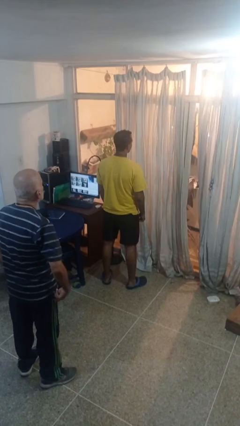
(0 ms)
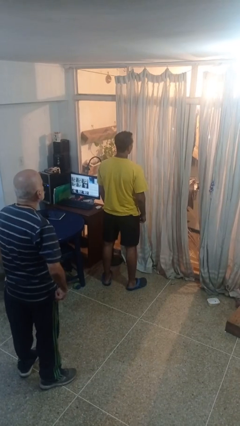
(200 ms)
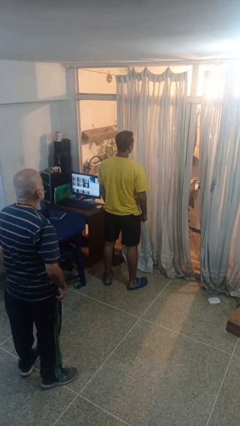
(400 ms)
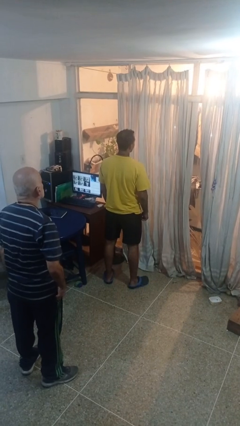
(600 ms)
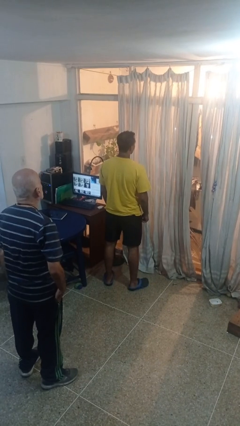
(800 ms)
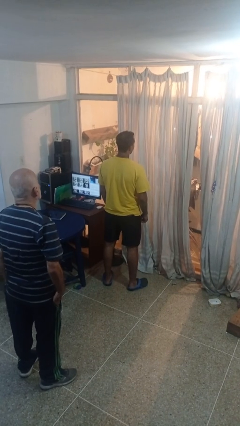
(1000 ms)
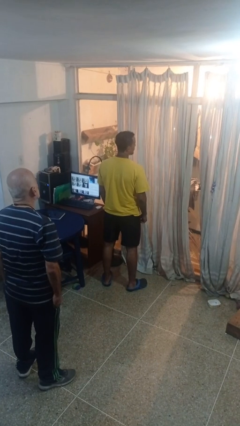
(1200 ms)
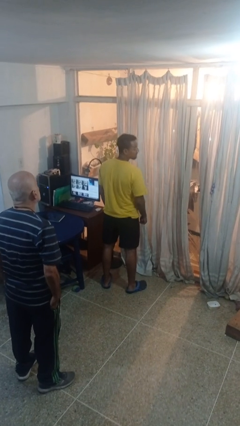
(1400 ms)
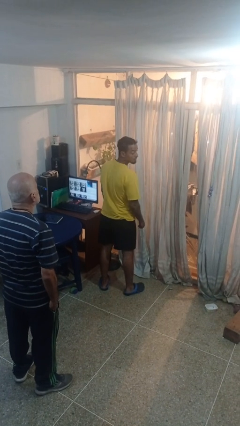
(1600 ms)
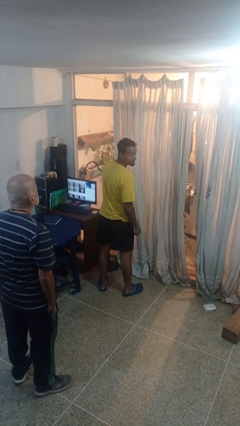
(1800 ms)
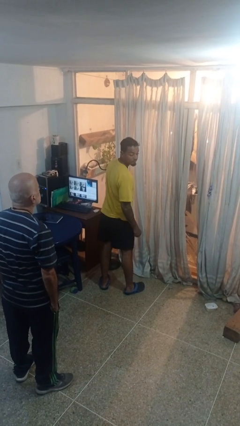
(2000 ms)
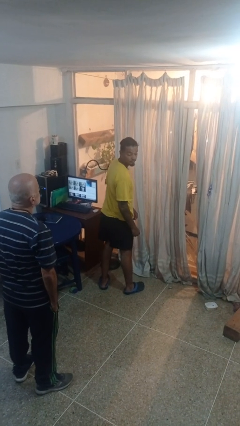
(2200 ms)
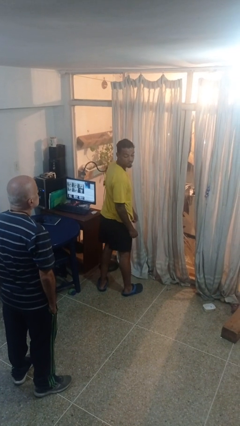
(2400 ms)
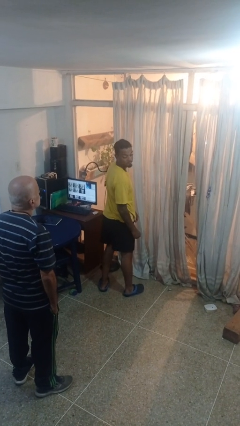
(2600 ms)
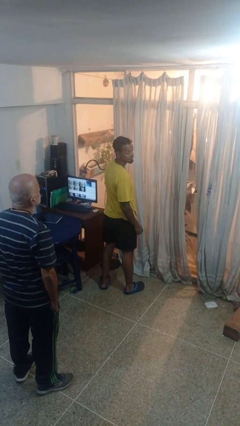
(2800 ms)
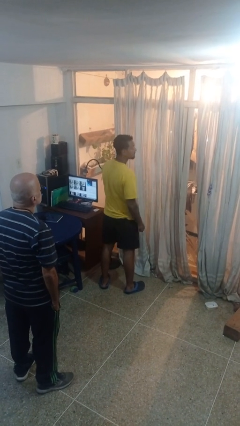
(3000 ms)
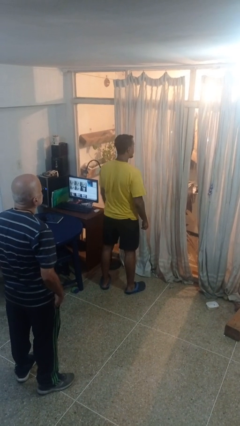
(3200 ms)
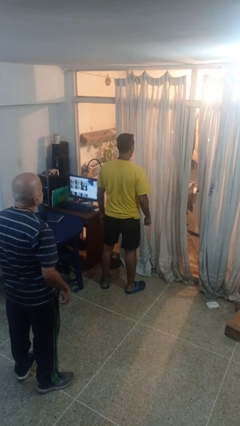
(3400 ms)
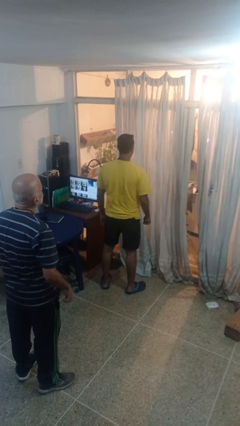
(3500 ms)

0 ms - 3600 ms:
person looks over shoulder

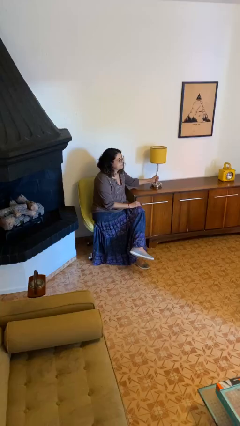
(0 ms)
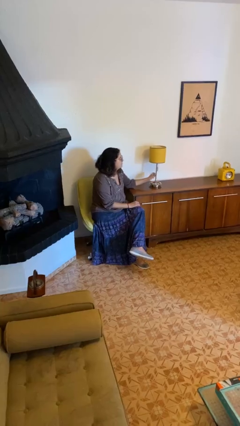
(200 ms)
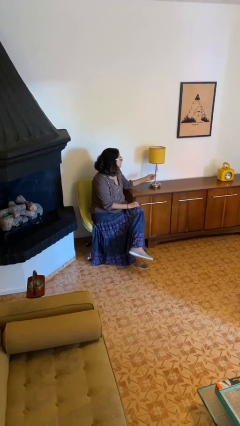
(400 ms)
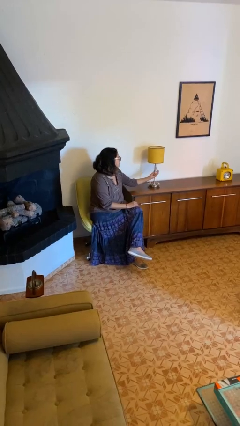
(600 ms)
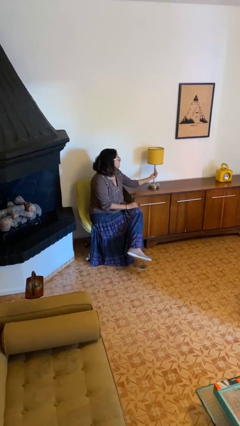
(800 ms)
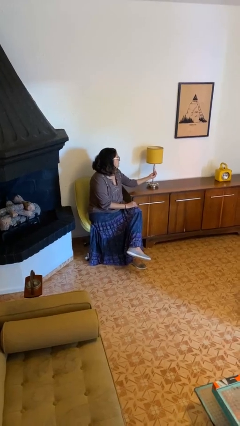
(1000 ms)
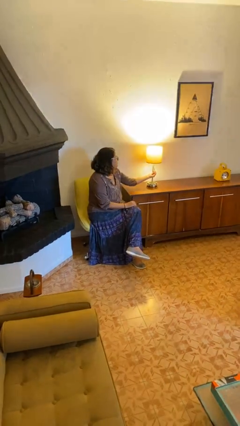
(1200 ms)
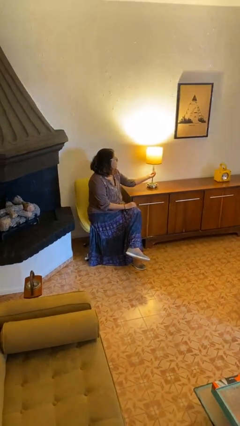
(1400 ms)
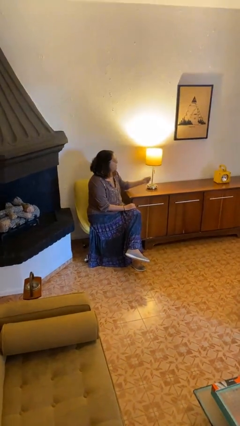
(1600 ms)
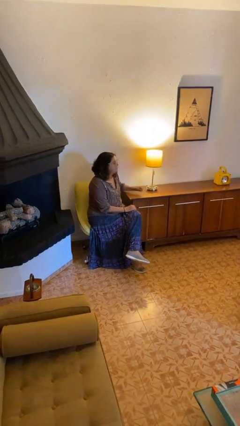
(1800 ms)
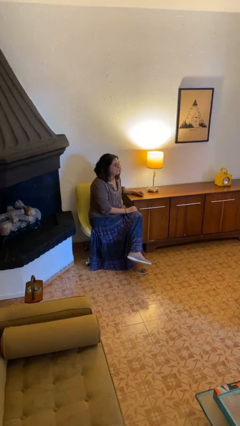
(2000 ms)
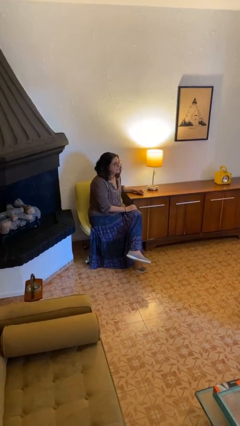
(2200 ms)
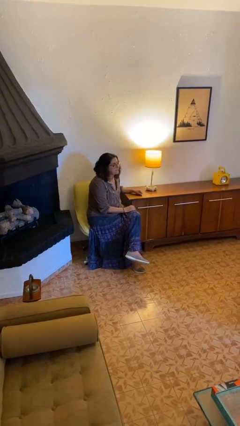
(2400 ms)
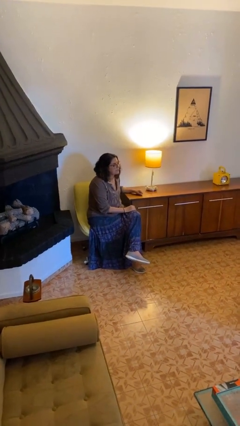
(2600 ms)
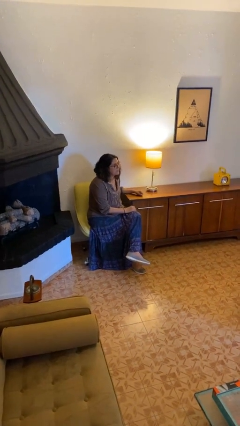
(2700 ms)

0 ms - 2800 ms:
person turns on lamp

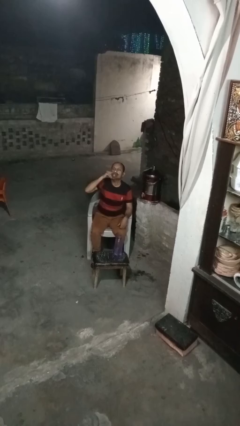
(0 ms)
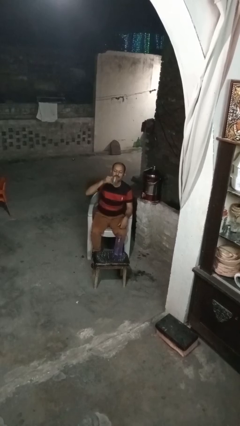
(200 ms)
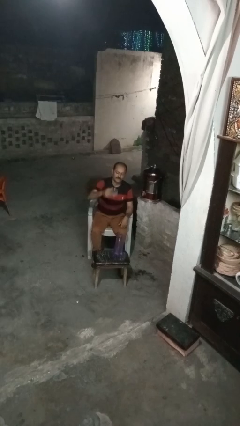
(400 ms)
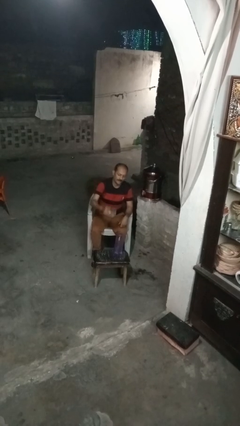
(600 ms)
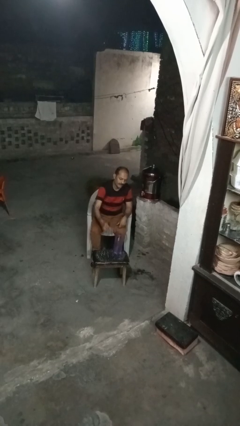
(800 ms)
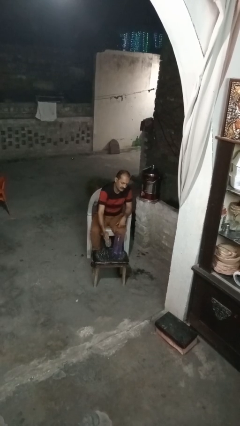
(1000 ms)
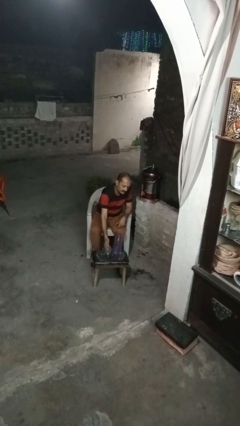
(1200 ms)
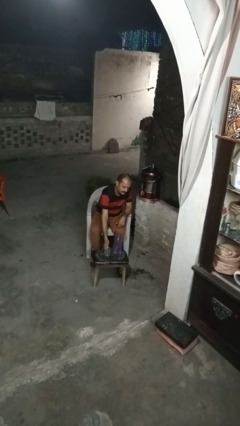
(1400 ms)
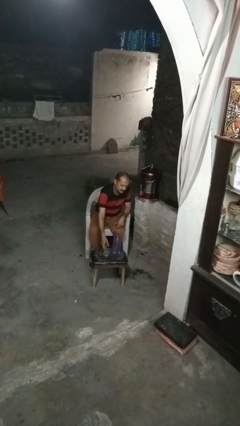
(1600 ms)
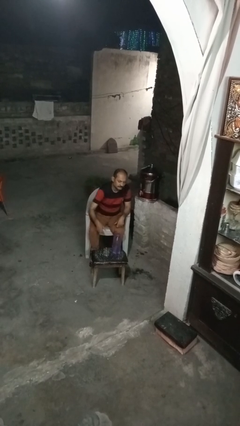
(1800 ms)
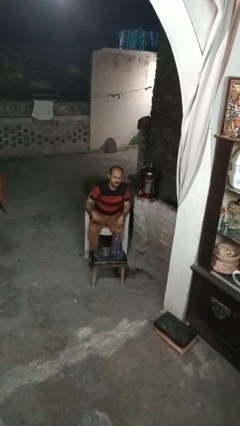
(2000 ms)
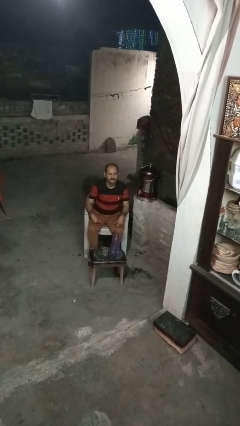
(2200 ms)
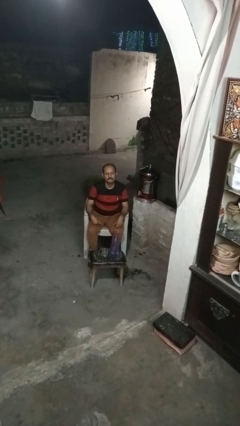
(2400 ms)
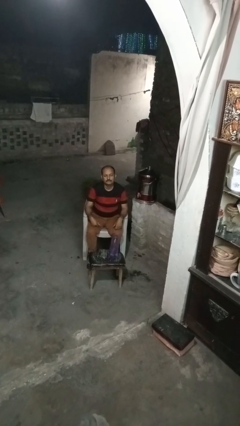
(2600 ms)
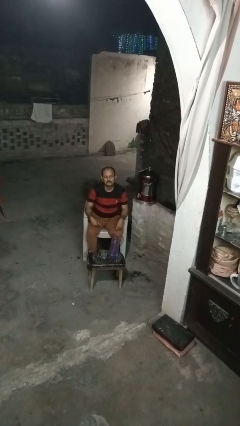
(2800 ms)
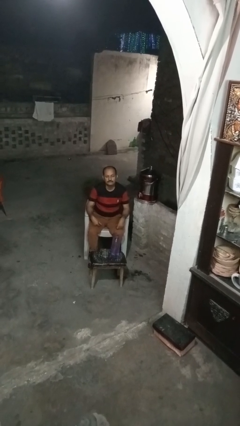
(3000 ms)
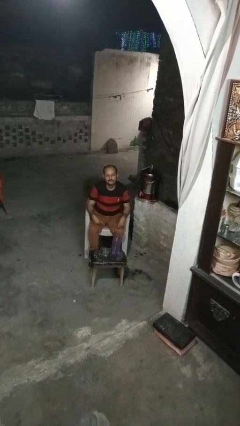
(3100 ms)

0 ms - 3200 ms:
person puts down object on table

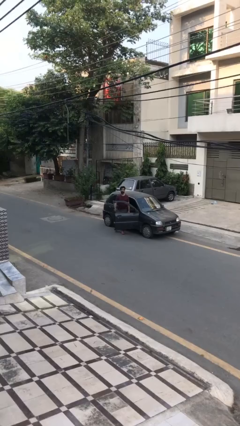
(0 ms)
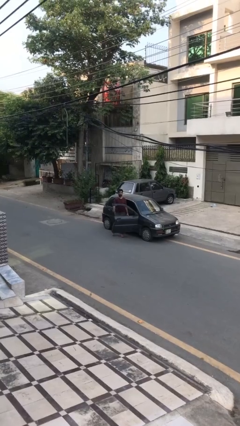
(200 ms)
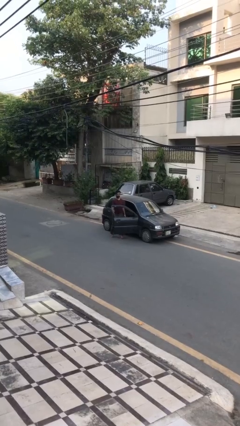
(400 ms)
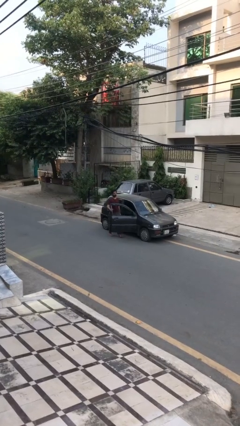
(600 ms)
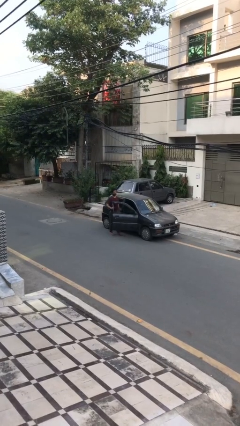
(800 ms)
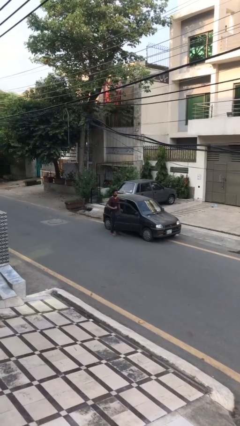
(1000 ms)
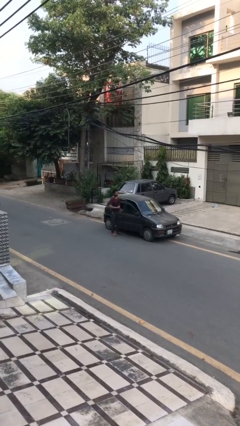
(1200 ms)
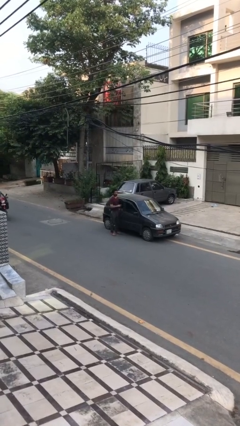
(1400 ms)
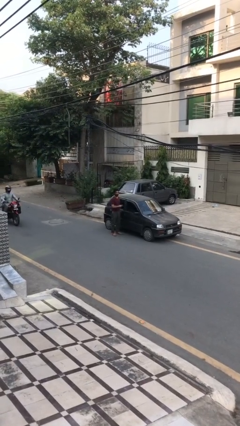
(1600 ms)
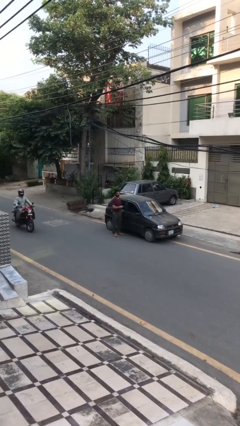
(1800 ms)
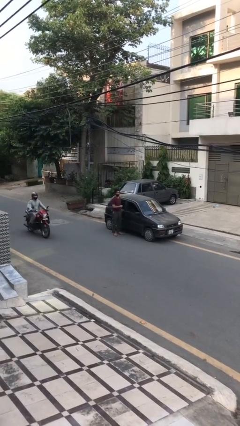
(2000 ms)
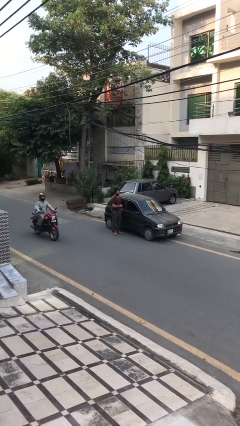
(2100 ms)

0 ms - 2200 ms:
person closes car door

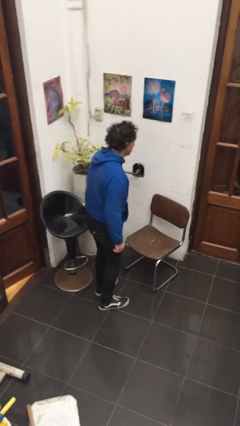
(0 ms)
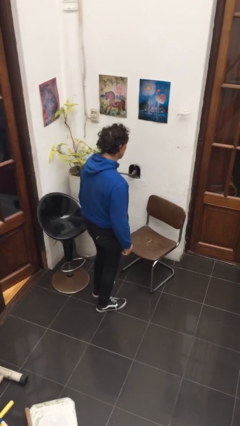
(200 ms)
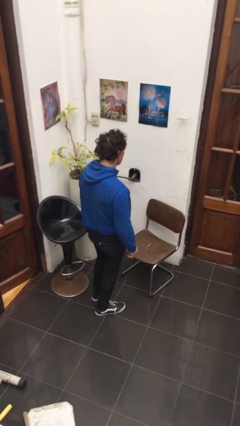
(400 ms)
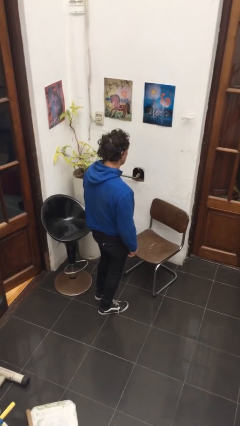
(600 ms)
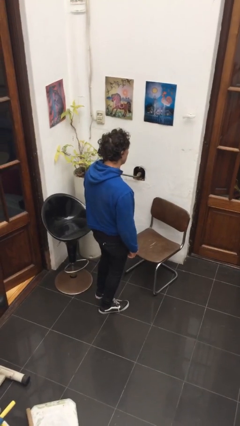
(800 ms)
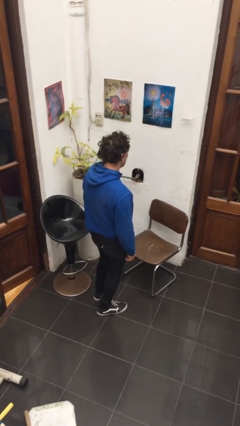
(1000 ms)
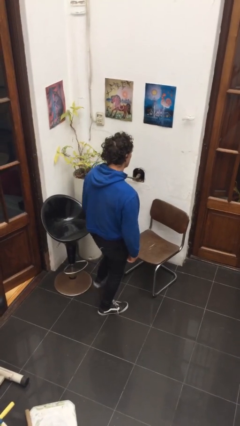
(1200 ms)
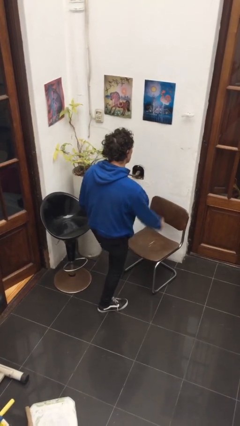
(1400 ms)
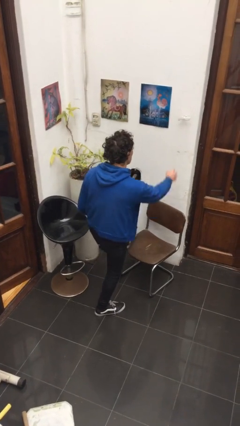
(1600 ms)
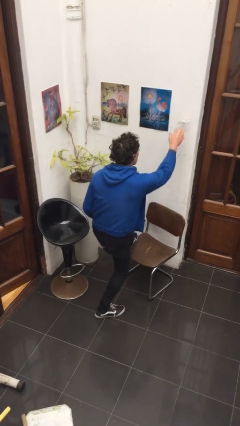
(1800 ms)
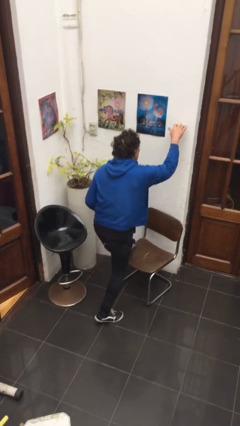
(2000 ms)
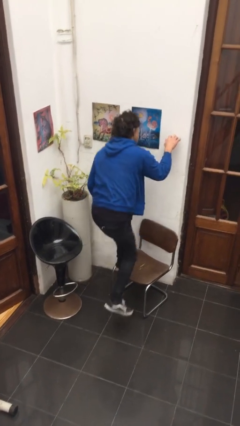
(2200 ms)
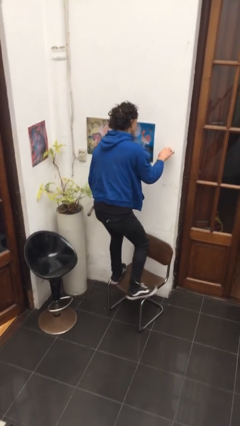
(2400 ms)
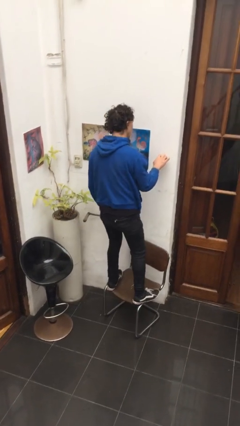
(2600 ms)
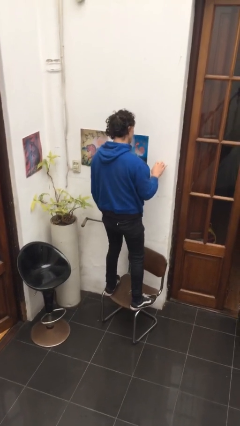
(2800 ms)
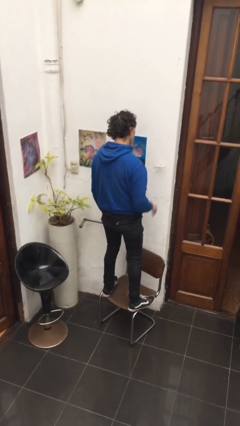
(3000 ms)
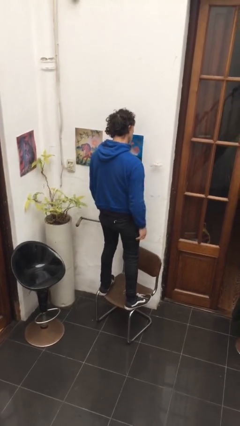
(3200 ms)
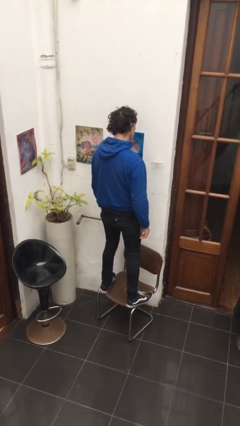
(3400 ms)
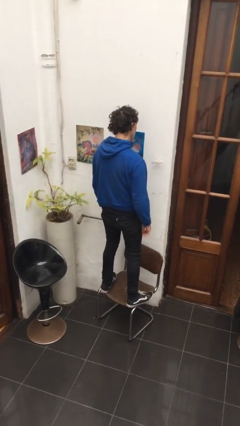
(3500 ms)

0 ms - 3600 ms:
person climbs on chair

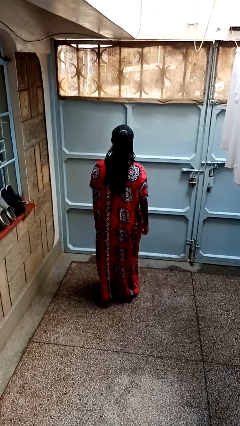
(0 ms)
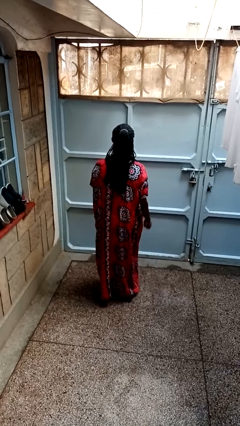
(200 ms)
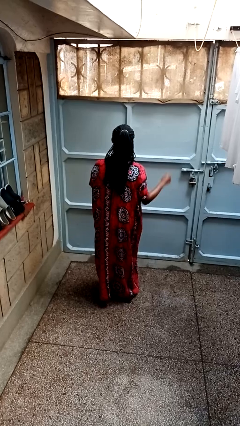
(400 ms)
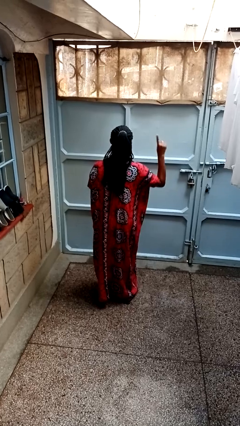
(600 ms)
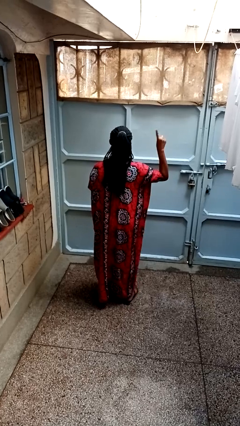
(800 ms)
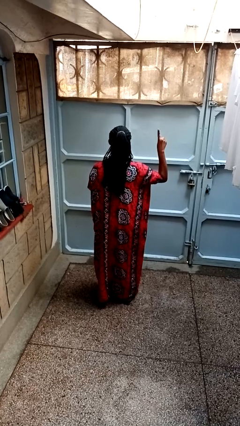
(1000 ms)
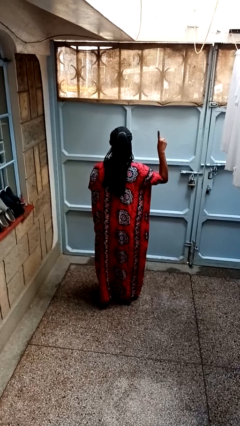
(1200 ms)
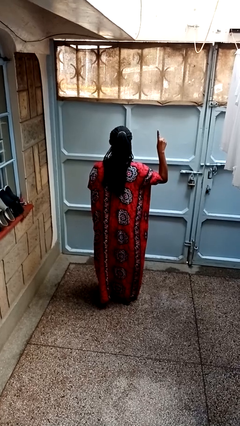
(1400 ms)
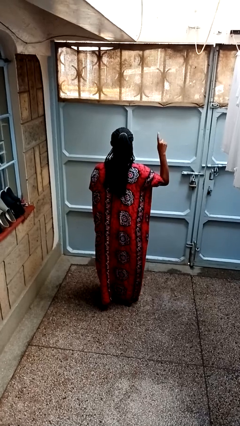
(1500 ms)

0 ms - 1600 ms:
person gestures number one

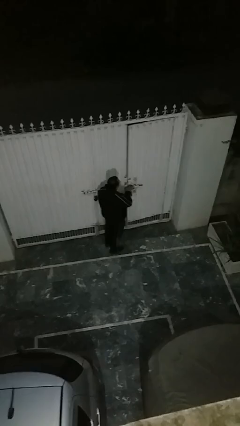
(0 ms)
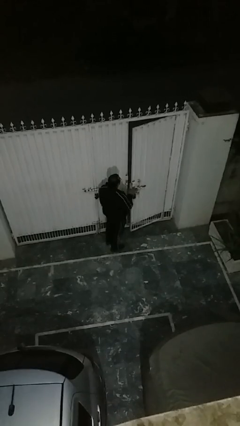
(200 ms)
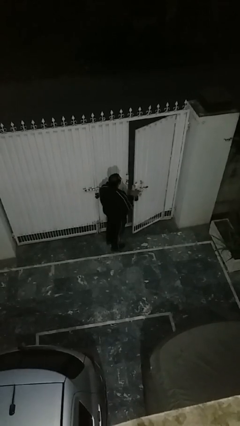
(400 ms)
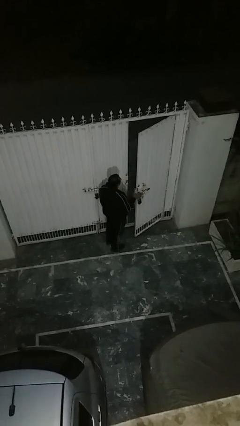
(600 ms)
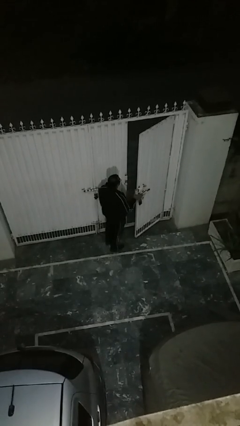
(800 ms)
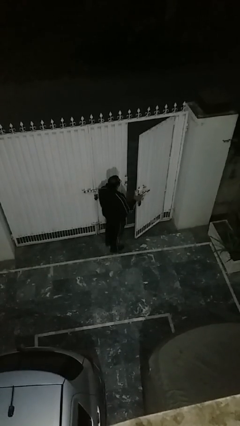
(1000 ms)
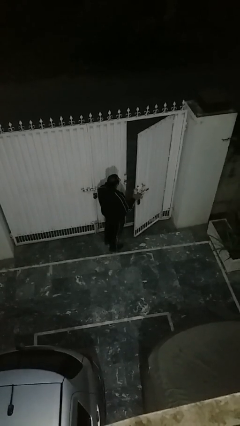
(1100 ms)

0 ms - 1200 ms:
person opens facility door
